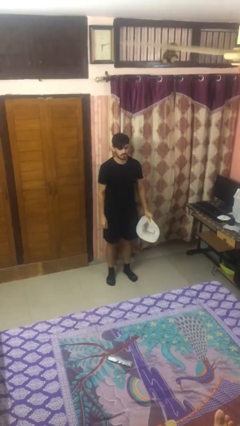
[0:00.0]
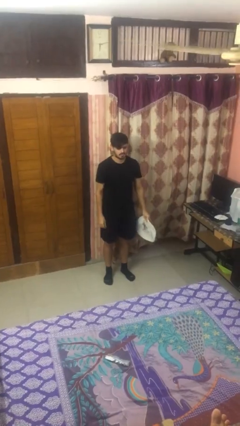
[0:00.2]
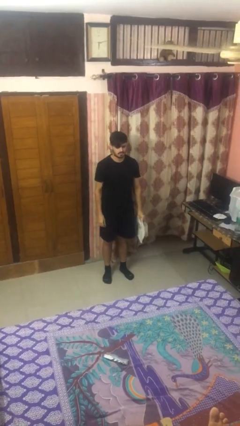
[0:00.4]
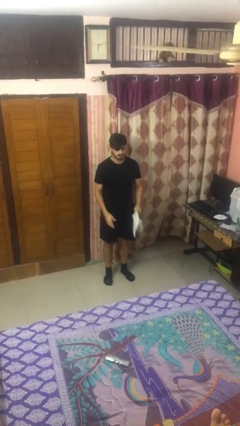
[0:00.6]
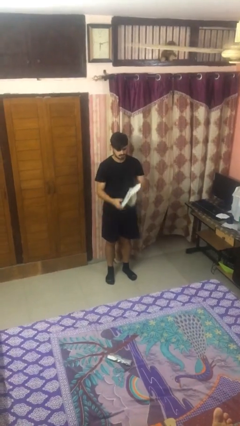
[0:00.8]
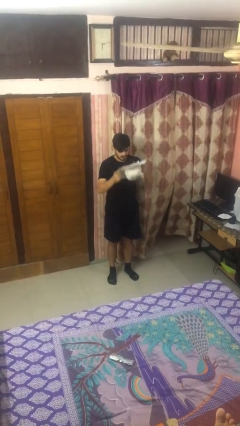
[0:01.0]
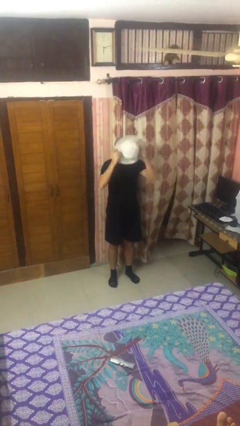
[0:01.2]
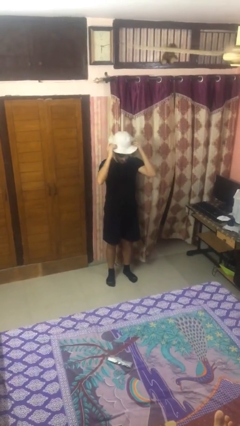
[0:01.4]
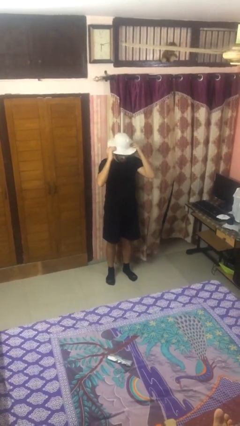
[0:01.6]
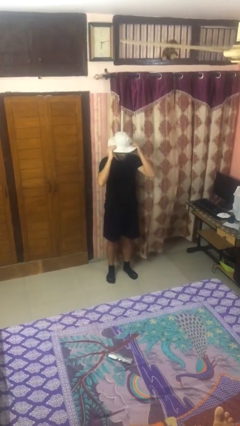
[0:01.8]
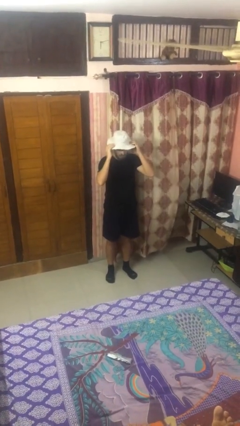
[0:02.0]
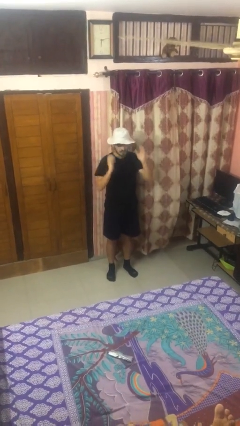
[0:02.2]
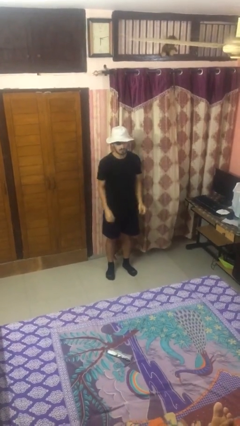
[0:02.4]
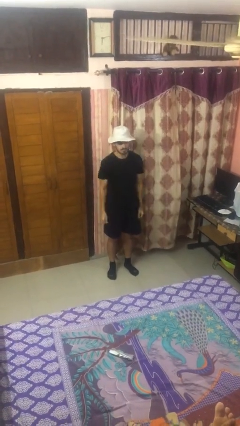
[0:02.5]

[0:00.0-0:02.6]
person puts on hat

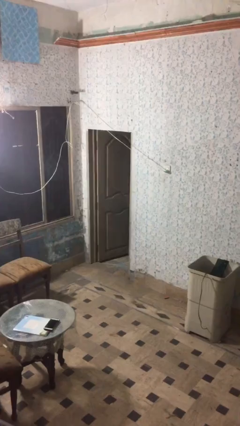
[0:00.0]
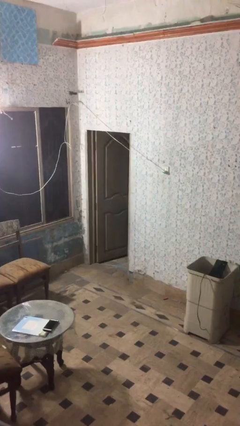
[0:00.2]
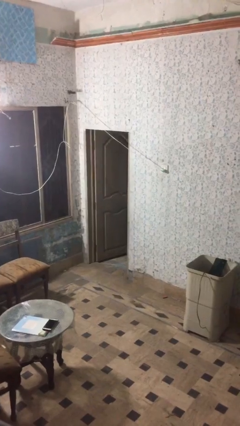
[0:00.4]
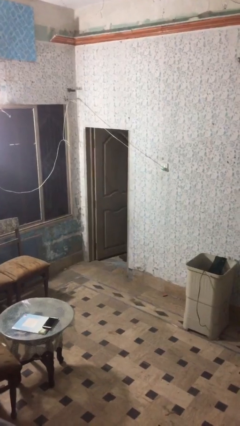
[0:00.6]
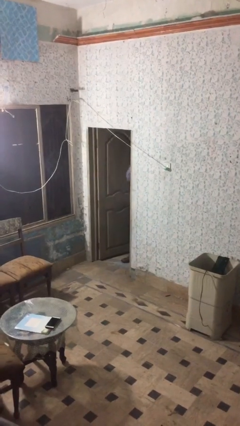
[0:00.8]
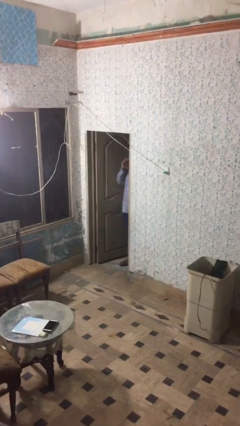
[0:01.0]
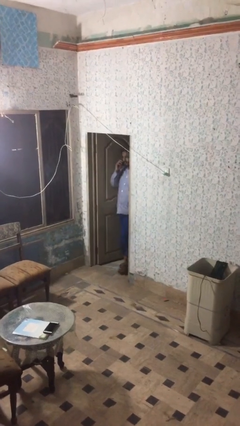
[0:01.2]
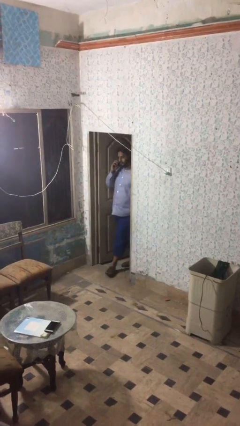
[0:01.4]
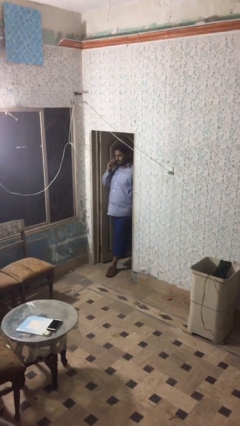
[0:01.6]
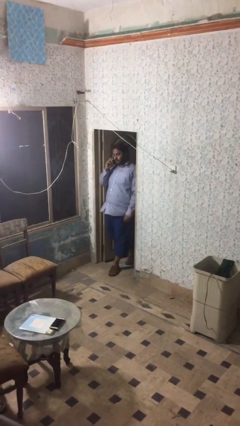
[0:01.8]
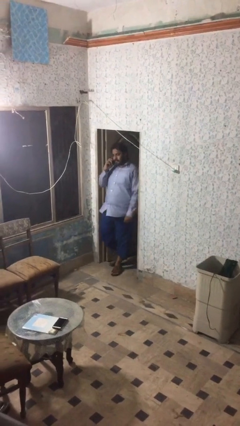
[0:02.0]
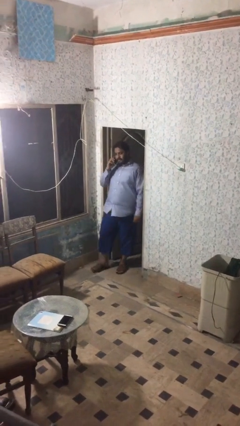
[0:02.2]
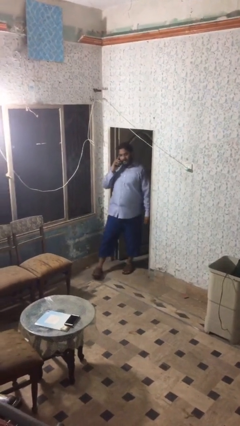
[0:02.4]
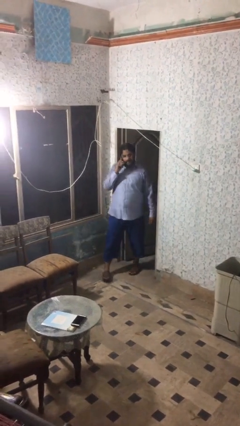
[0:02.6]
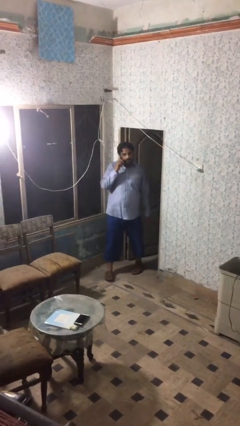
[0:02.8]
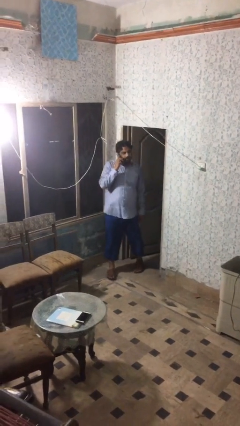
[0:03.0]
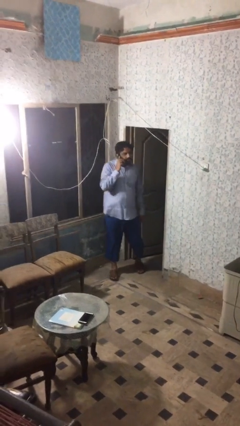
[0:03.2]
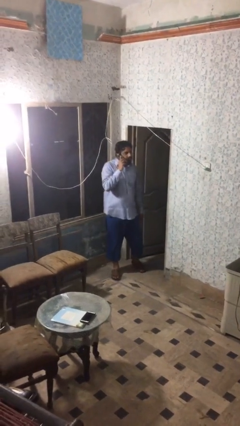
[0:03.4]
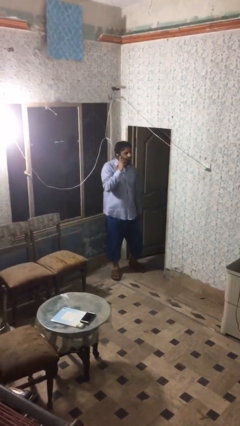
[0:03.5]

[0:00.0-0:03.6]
person enters scene through structure

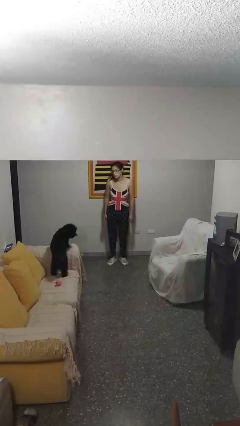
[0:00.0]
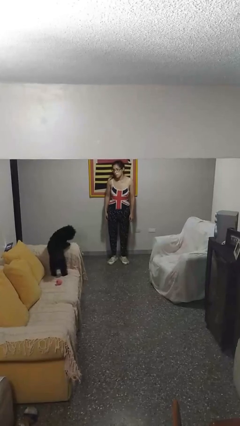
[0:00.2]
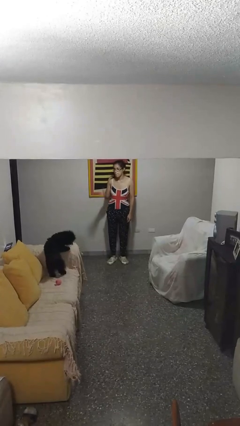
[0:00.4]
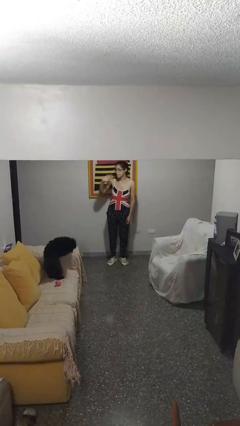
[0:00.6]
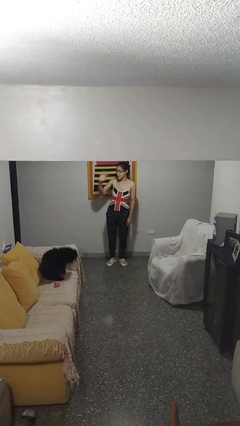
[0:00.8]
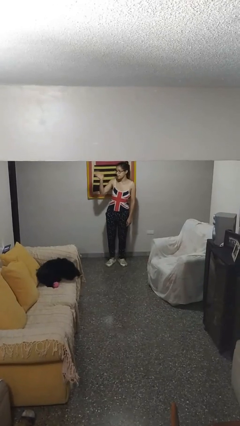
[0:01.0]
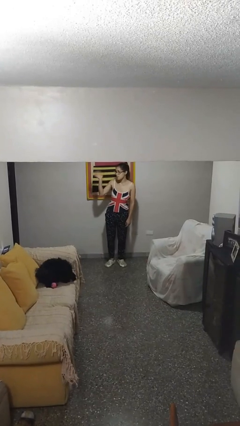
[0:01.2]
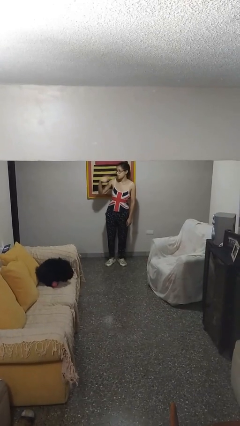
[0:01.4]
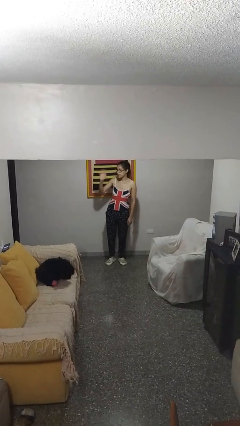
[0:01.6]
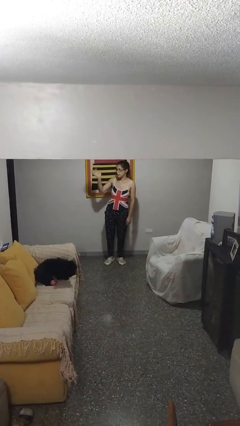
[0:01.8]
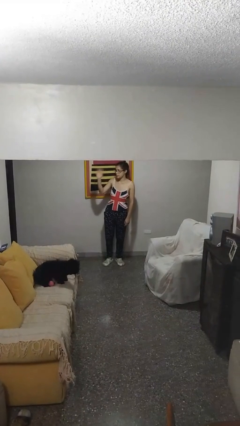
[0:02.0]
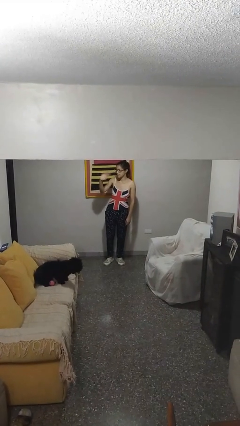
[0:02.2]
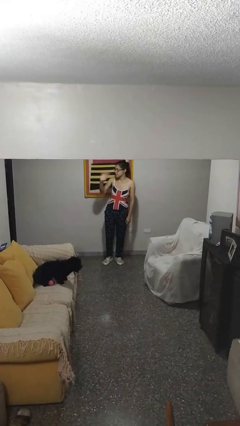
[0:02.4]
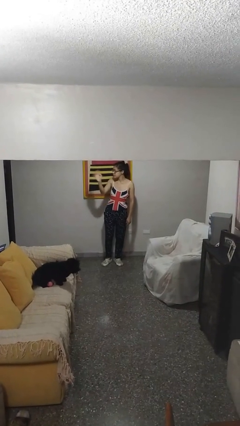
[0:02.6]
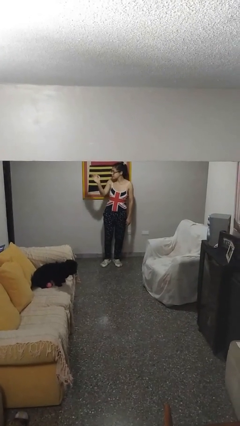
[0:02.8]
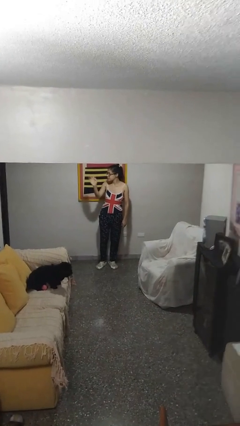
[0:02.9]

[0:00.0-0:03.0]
person waves at person

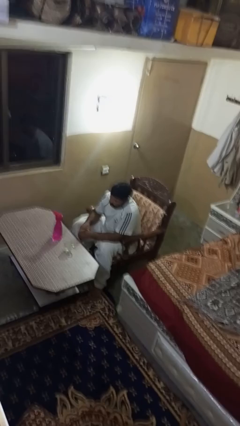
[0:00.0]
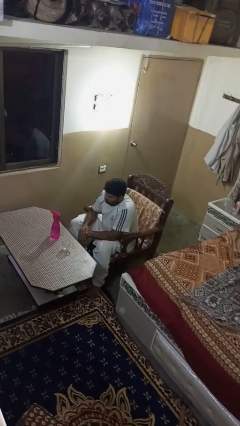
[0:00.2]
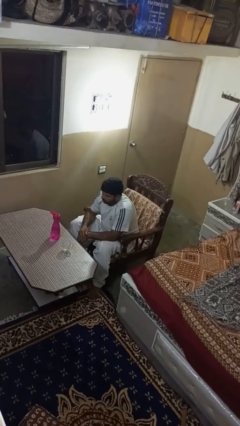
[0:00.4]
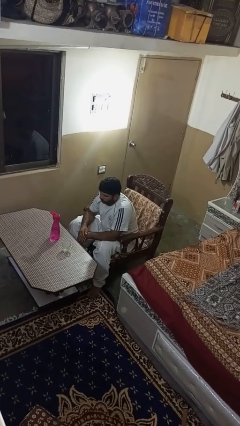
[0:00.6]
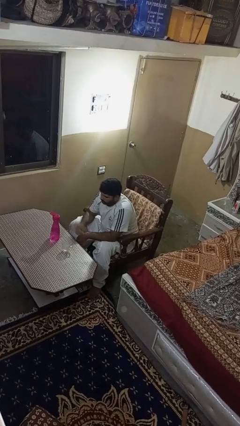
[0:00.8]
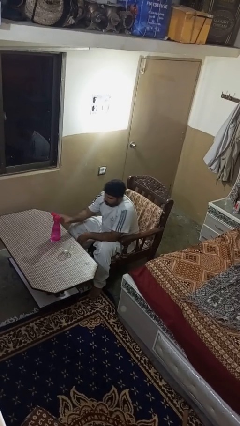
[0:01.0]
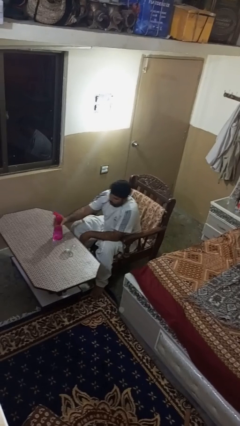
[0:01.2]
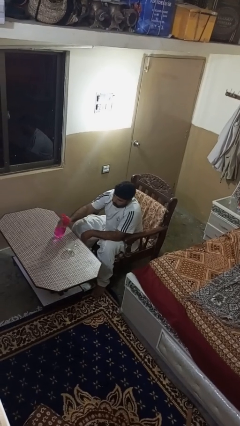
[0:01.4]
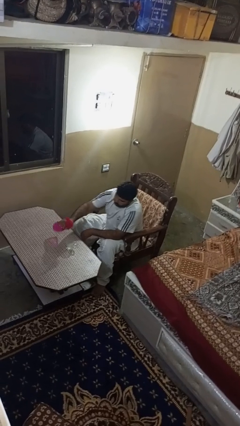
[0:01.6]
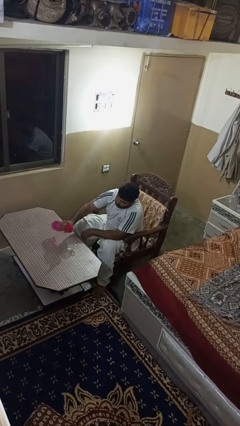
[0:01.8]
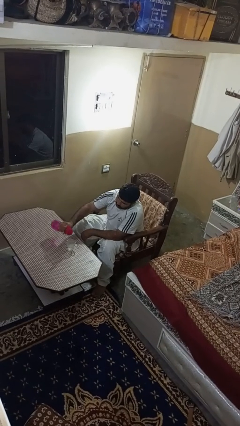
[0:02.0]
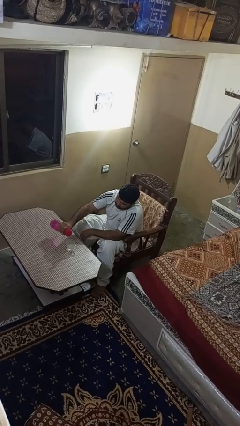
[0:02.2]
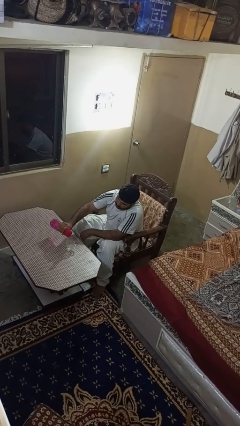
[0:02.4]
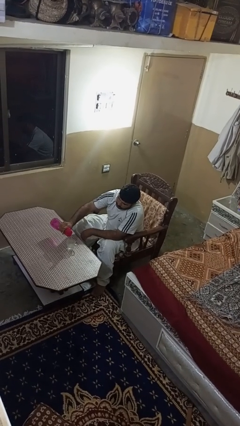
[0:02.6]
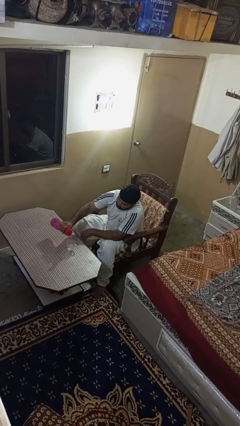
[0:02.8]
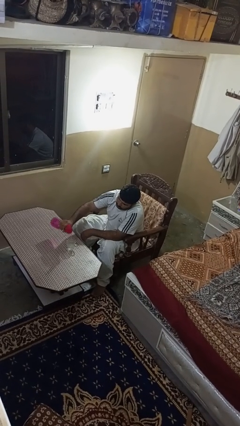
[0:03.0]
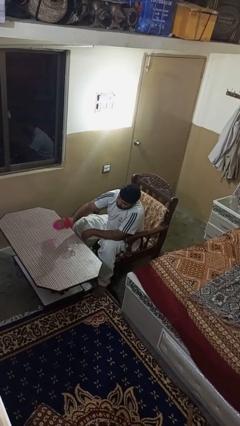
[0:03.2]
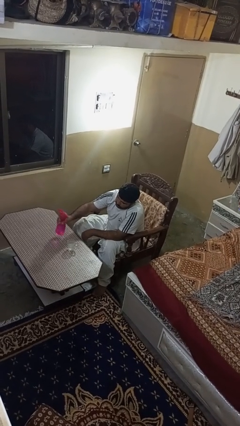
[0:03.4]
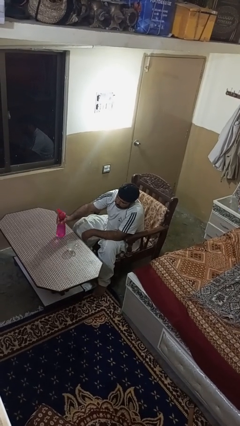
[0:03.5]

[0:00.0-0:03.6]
person pours liquid into cup

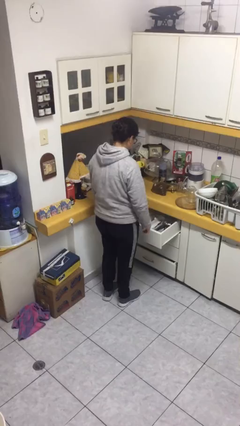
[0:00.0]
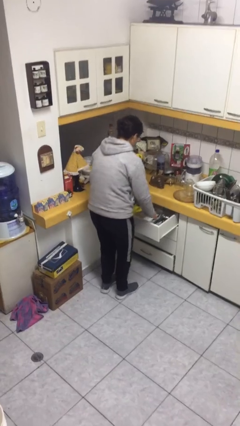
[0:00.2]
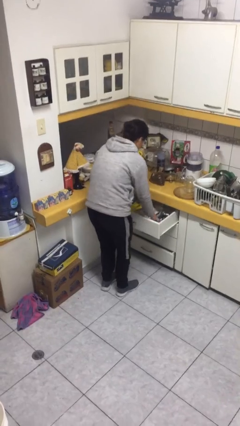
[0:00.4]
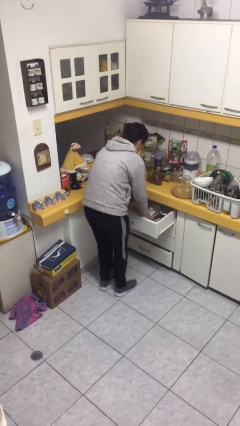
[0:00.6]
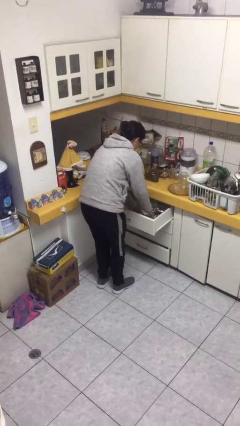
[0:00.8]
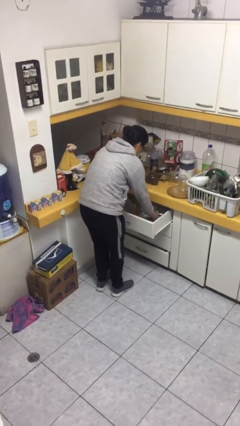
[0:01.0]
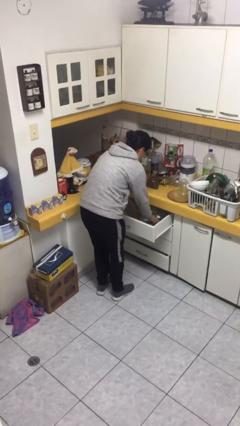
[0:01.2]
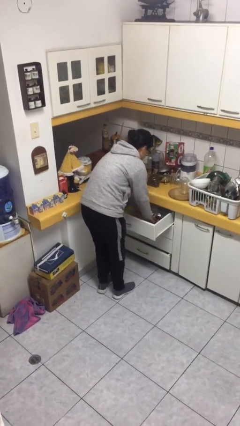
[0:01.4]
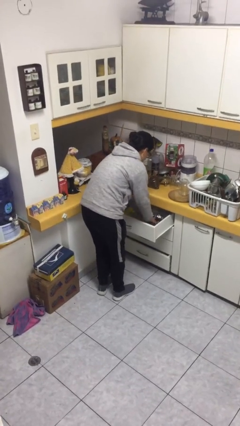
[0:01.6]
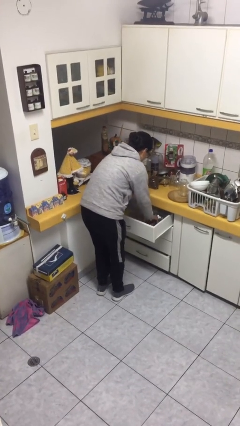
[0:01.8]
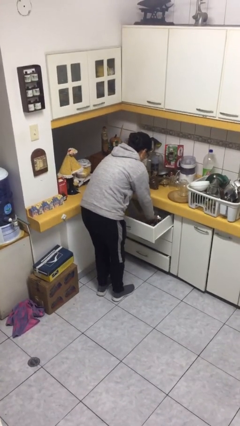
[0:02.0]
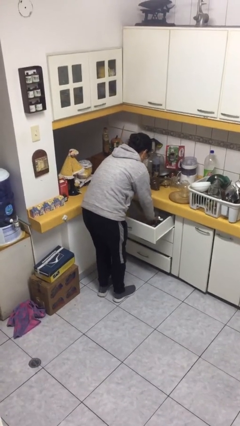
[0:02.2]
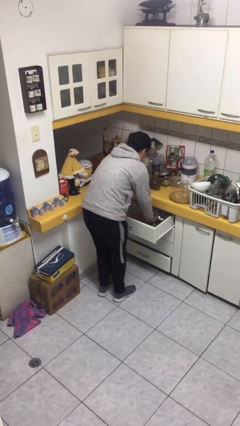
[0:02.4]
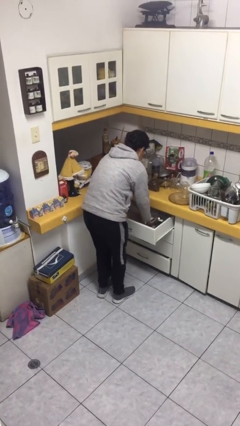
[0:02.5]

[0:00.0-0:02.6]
person searches in kitchen drawer

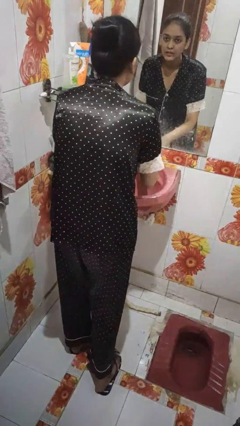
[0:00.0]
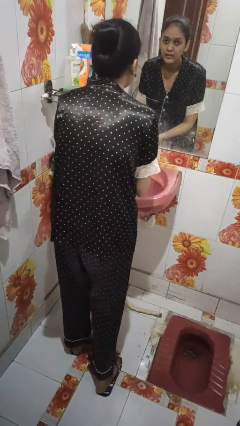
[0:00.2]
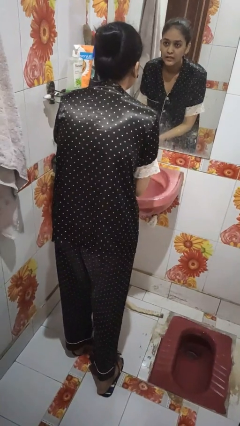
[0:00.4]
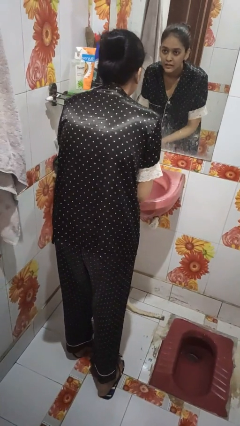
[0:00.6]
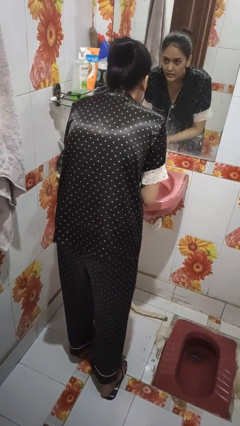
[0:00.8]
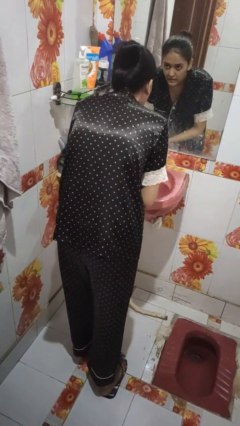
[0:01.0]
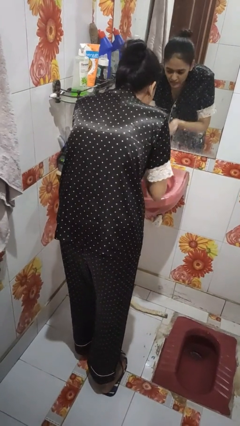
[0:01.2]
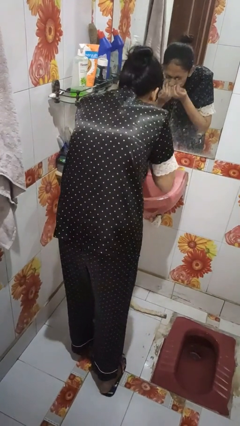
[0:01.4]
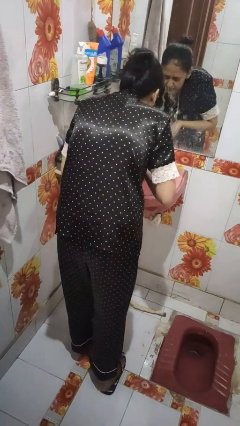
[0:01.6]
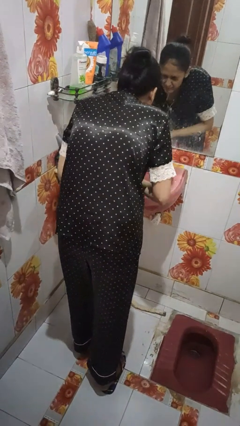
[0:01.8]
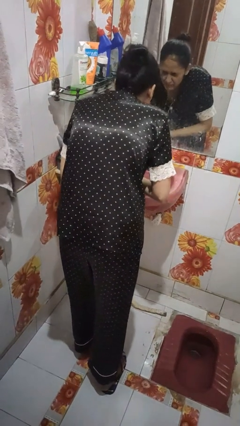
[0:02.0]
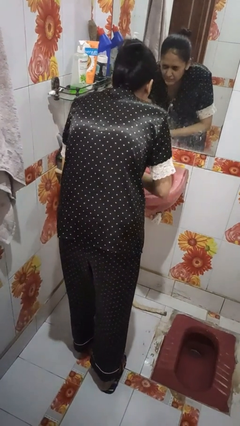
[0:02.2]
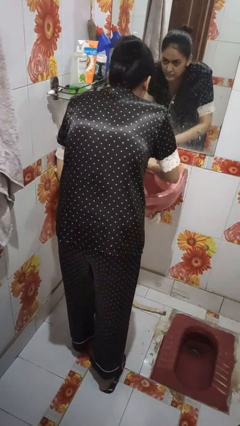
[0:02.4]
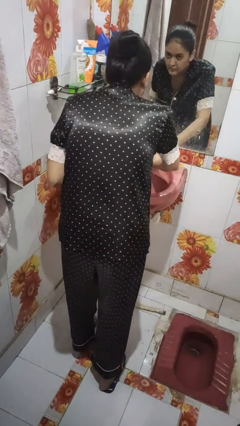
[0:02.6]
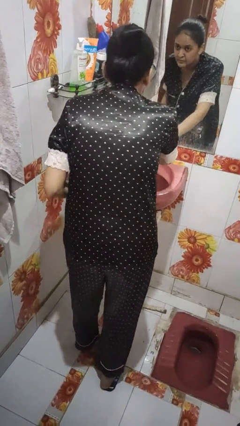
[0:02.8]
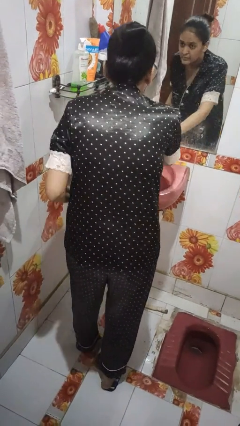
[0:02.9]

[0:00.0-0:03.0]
person washes face
